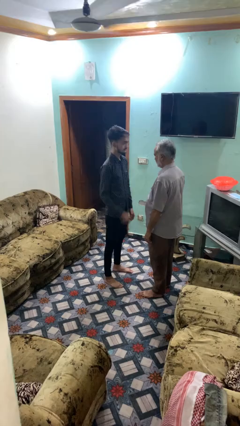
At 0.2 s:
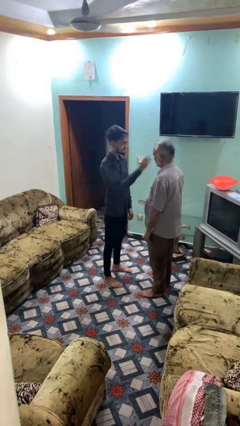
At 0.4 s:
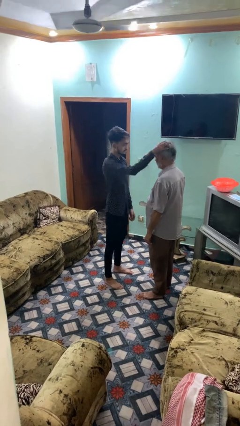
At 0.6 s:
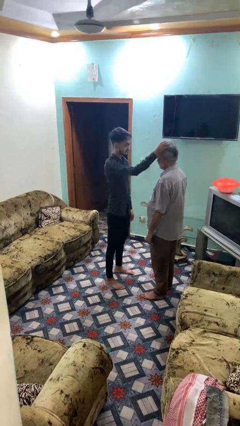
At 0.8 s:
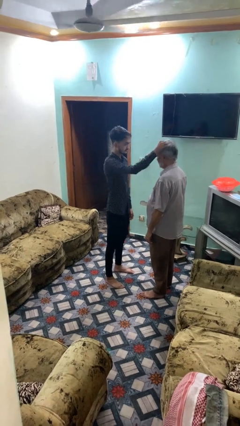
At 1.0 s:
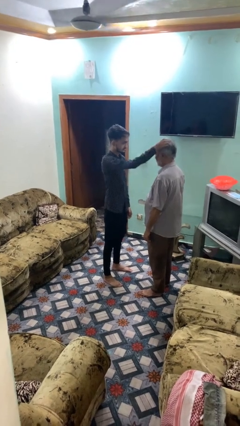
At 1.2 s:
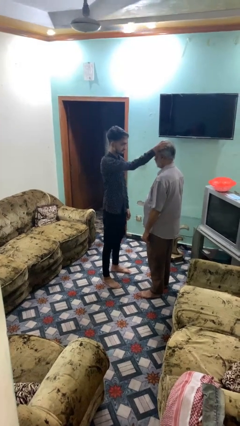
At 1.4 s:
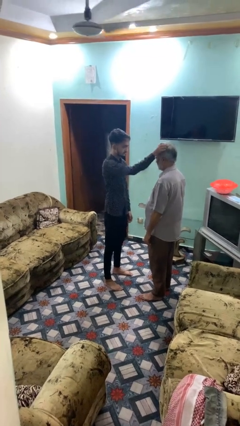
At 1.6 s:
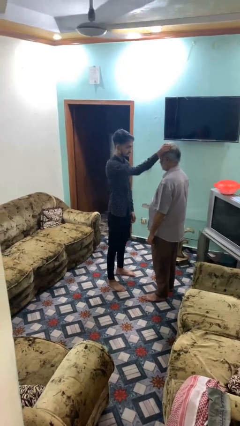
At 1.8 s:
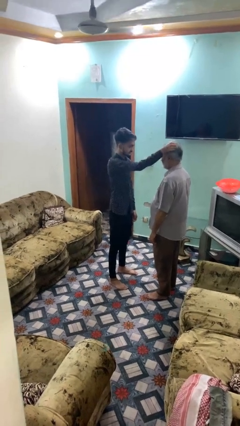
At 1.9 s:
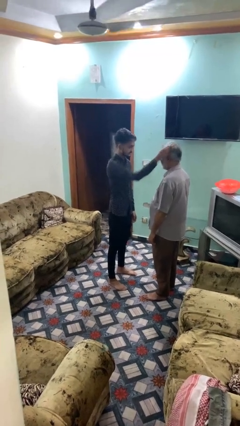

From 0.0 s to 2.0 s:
person grabs person by hair

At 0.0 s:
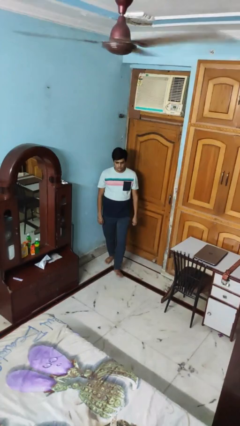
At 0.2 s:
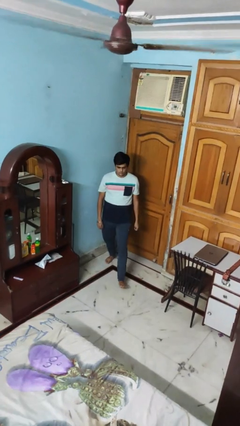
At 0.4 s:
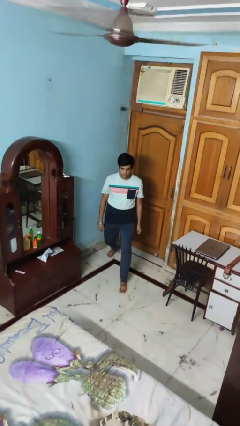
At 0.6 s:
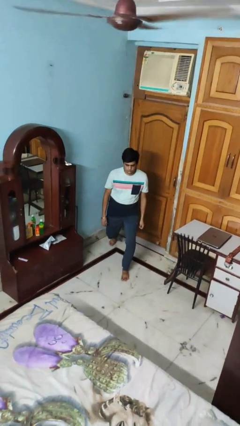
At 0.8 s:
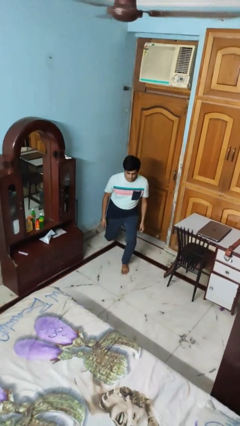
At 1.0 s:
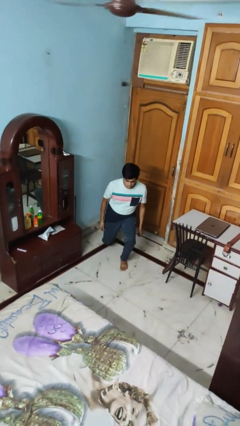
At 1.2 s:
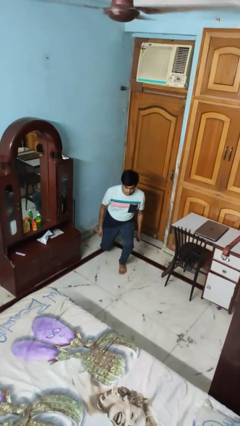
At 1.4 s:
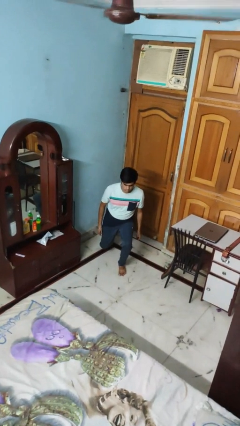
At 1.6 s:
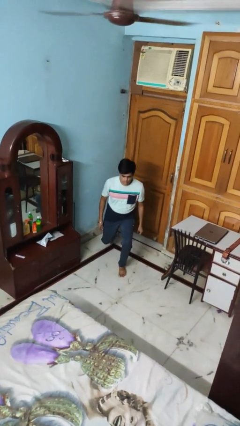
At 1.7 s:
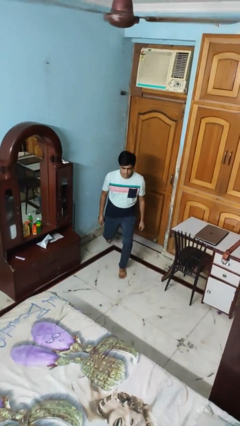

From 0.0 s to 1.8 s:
person exercises with lunges

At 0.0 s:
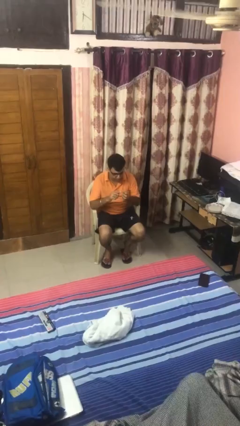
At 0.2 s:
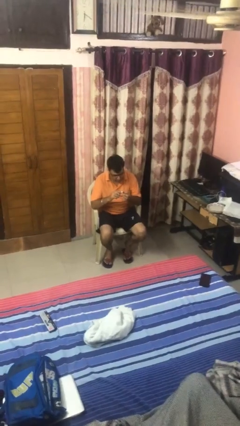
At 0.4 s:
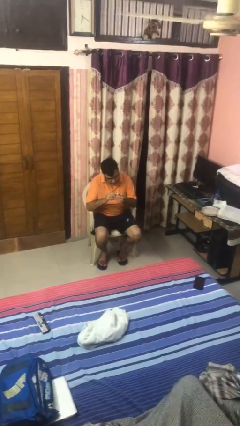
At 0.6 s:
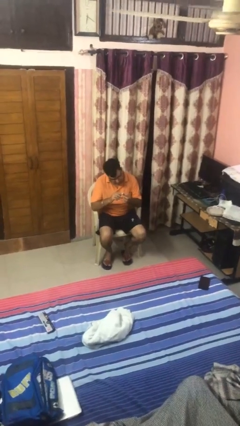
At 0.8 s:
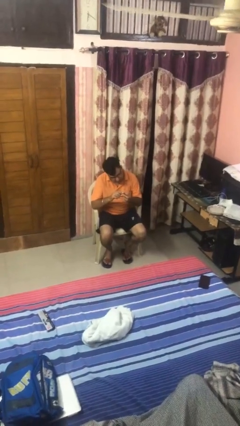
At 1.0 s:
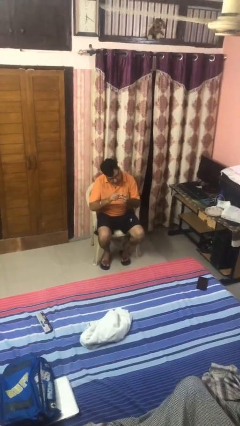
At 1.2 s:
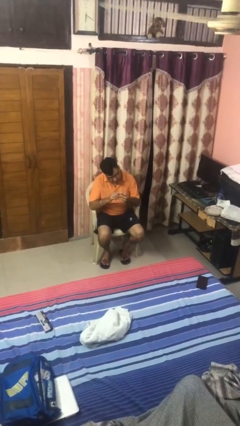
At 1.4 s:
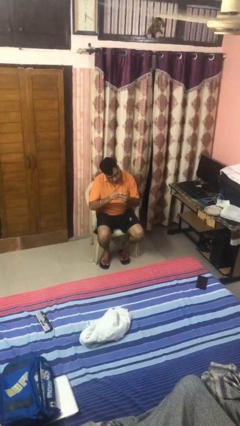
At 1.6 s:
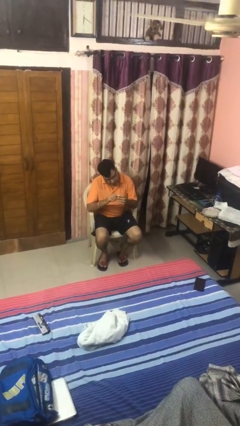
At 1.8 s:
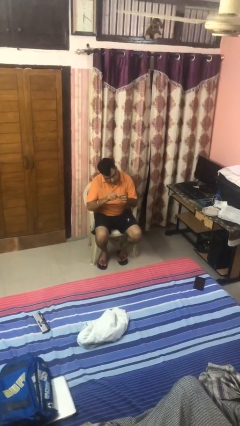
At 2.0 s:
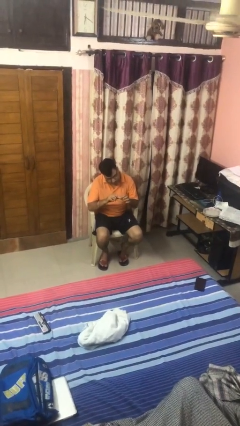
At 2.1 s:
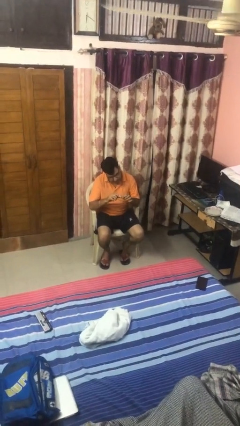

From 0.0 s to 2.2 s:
person clips fingernails

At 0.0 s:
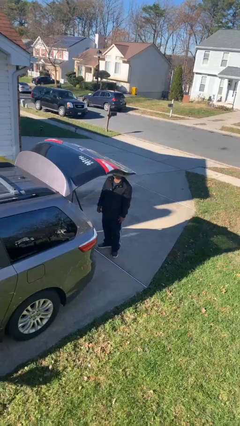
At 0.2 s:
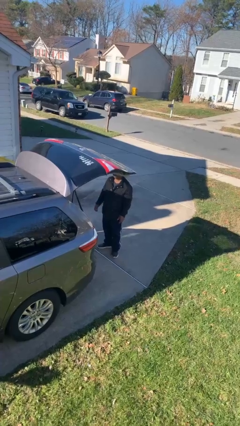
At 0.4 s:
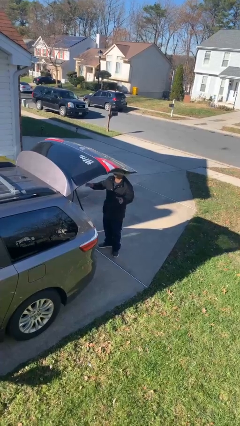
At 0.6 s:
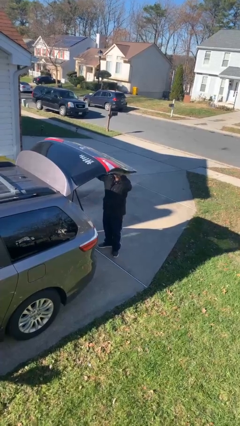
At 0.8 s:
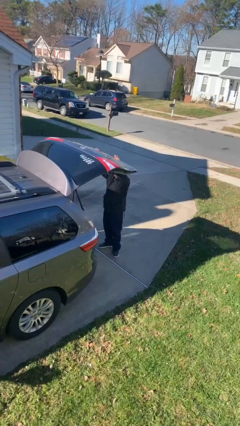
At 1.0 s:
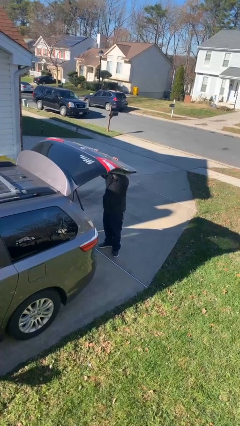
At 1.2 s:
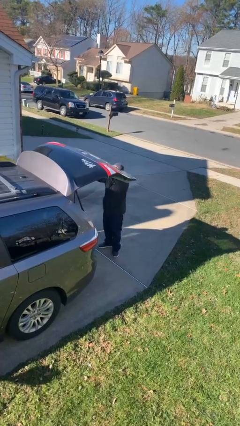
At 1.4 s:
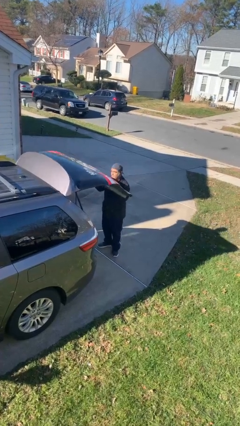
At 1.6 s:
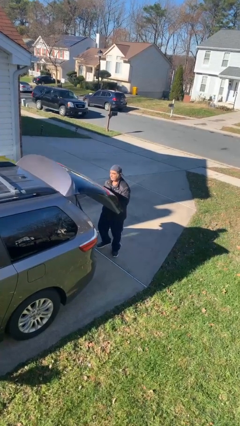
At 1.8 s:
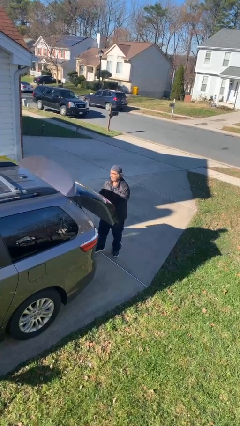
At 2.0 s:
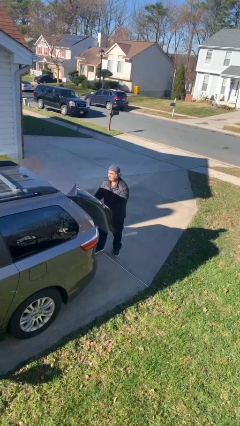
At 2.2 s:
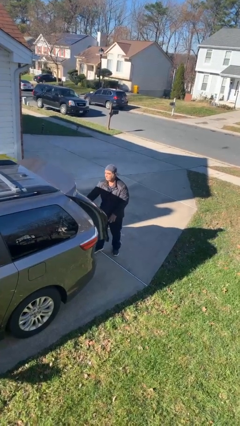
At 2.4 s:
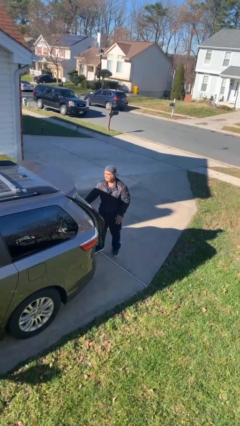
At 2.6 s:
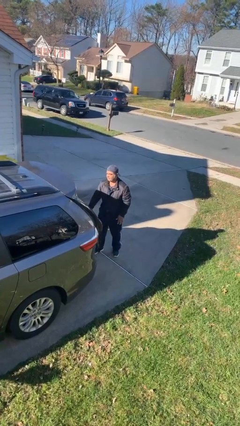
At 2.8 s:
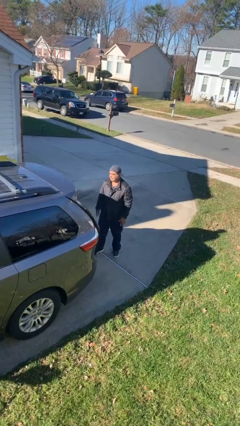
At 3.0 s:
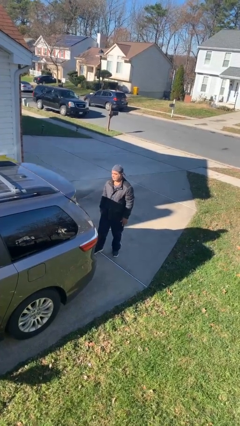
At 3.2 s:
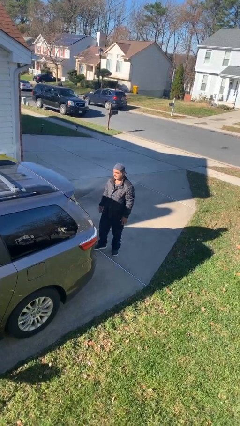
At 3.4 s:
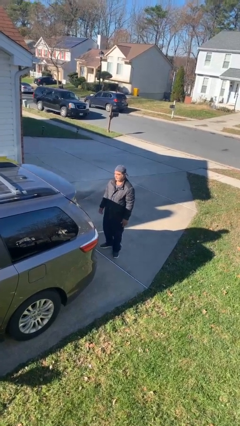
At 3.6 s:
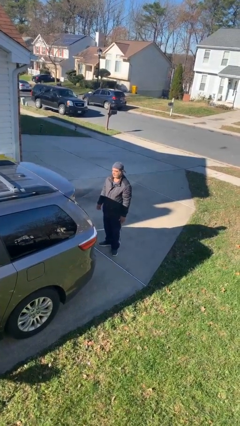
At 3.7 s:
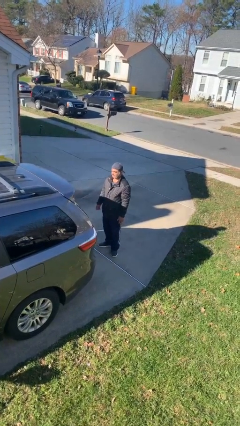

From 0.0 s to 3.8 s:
person closes car trunk

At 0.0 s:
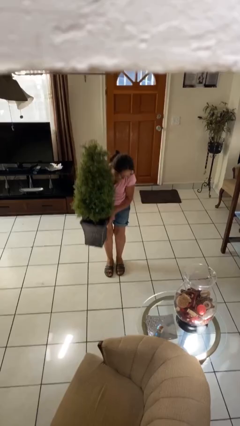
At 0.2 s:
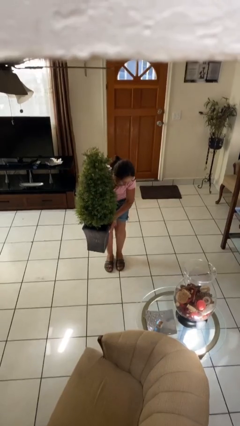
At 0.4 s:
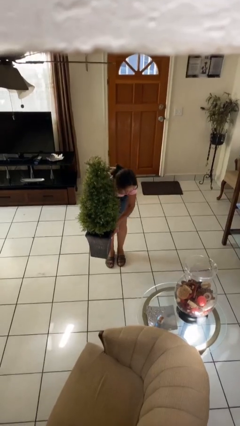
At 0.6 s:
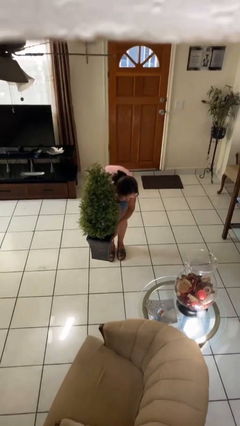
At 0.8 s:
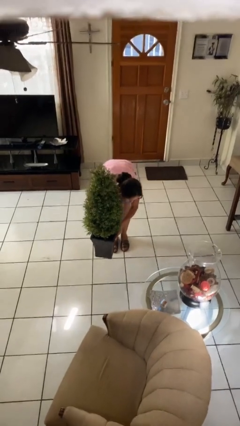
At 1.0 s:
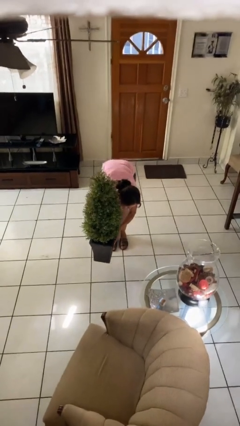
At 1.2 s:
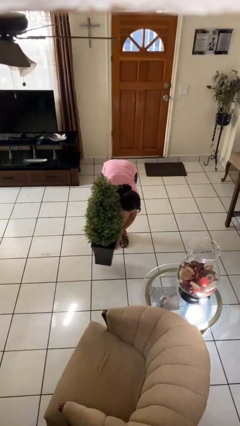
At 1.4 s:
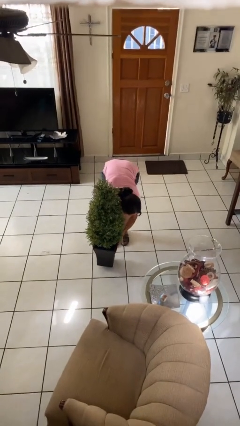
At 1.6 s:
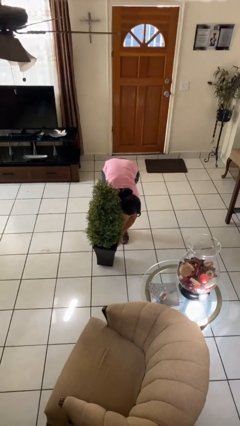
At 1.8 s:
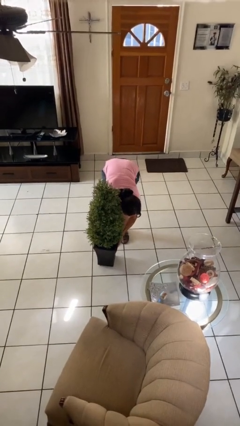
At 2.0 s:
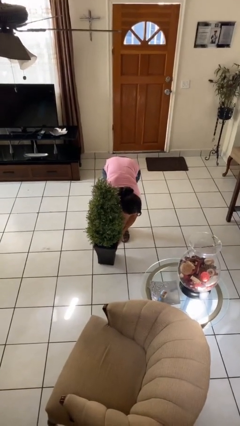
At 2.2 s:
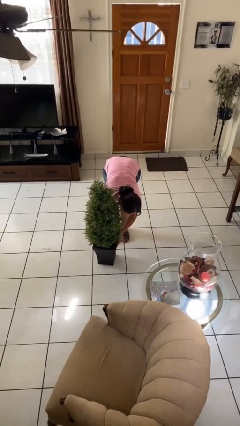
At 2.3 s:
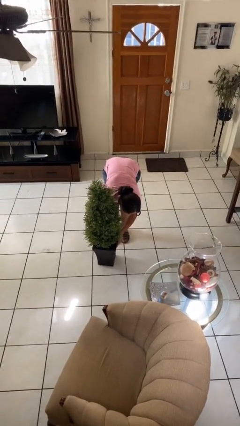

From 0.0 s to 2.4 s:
person puts down object on floor

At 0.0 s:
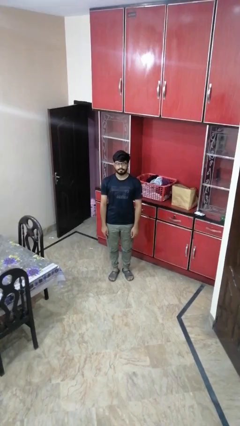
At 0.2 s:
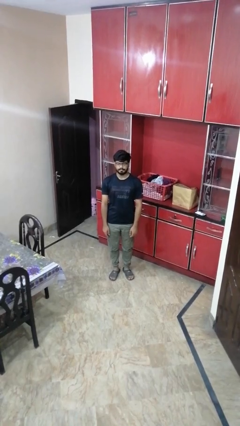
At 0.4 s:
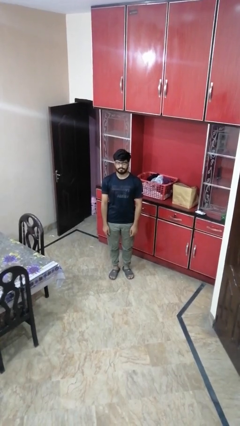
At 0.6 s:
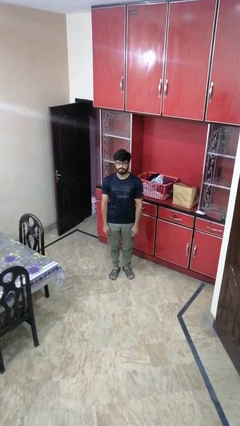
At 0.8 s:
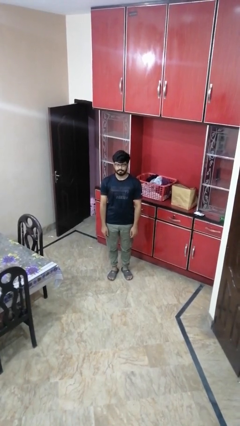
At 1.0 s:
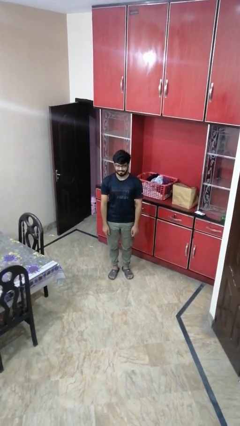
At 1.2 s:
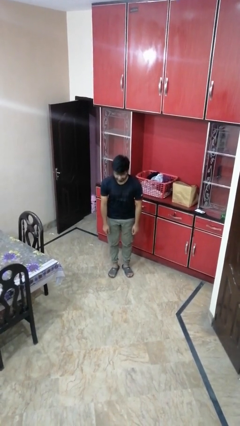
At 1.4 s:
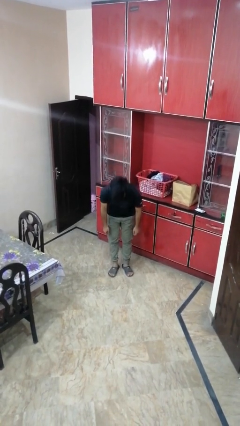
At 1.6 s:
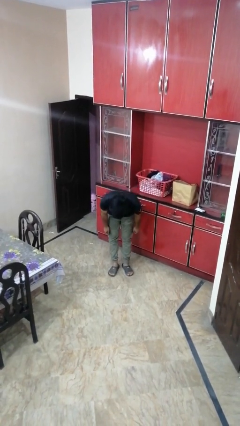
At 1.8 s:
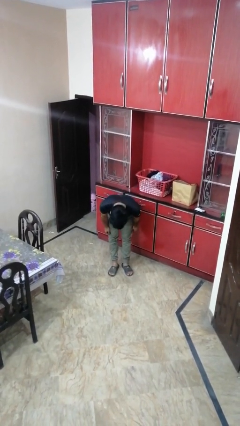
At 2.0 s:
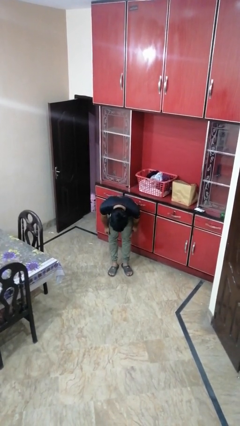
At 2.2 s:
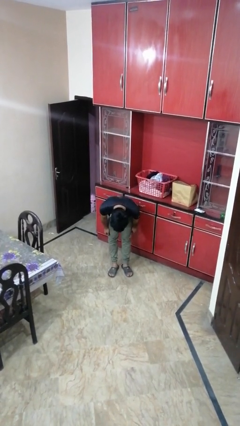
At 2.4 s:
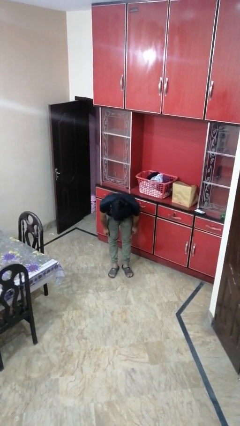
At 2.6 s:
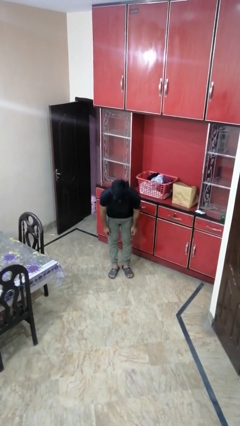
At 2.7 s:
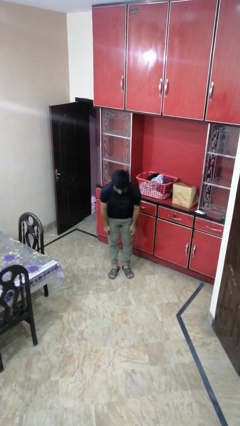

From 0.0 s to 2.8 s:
person bows

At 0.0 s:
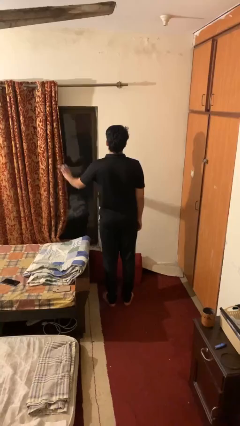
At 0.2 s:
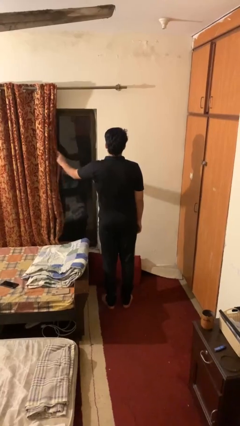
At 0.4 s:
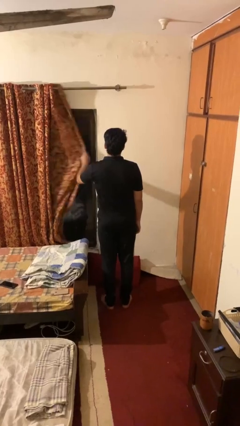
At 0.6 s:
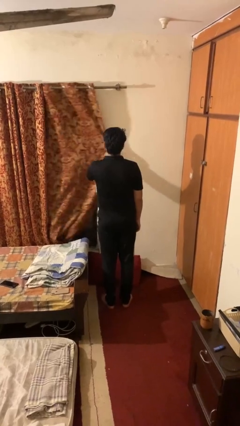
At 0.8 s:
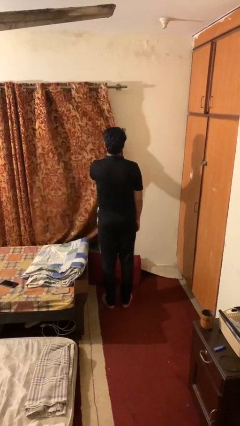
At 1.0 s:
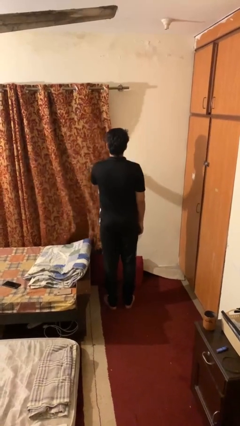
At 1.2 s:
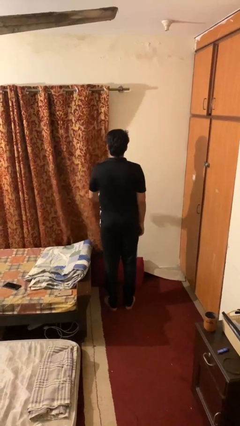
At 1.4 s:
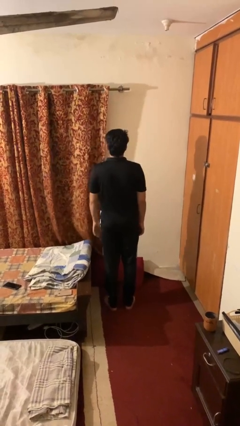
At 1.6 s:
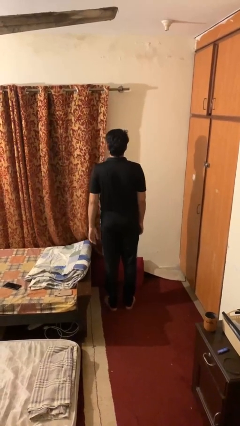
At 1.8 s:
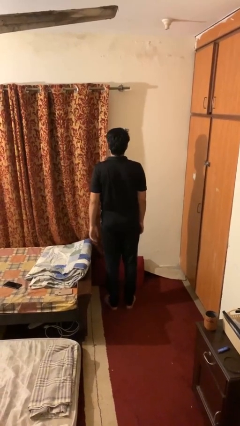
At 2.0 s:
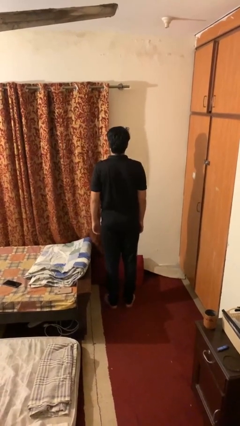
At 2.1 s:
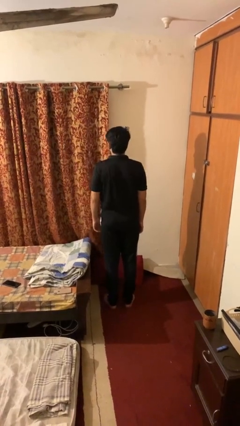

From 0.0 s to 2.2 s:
person closes curtains
